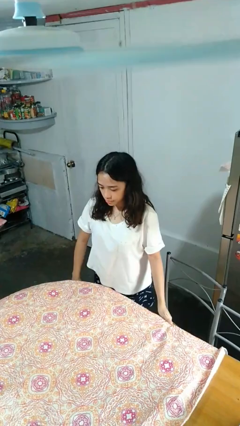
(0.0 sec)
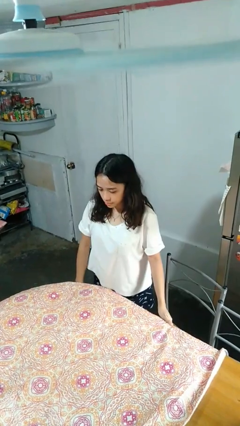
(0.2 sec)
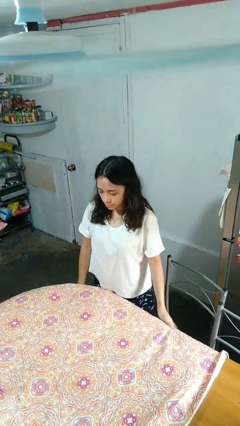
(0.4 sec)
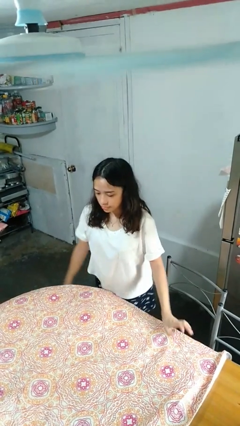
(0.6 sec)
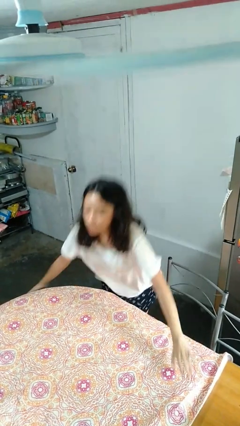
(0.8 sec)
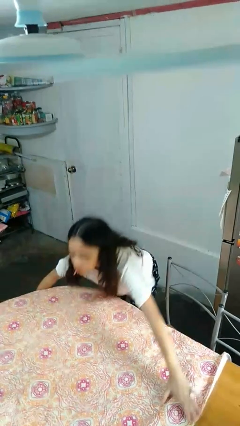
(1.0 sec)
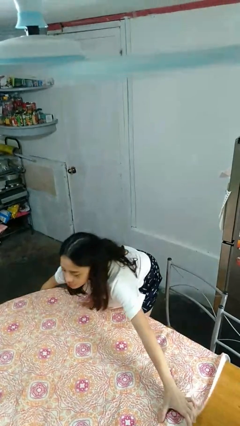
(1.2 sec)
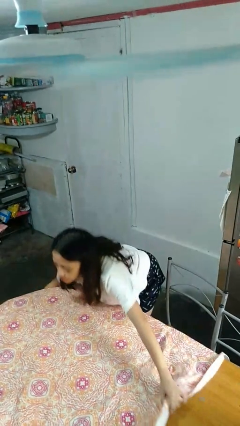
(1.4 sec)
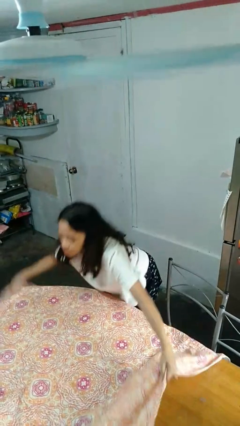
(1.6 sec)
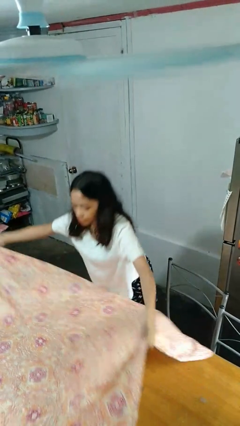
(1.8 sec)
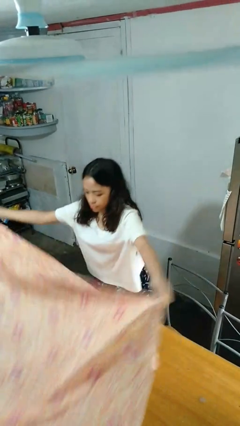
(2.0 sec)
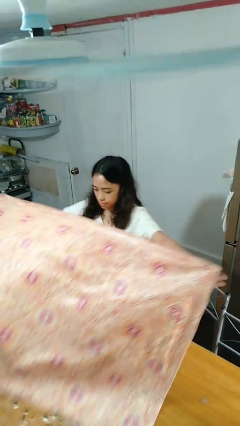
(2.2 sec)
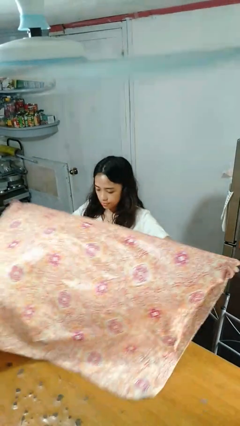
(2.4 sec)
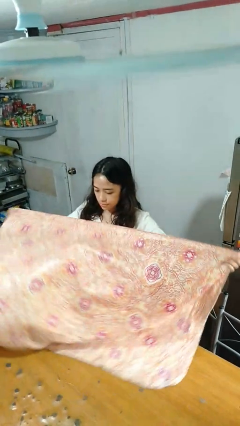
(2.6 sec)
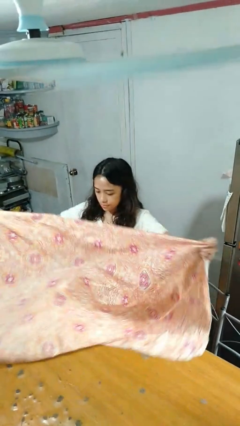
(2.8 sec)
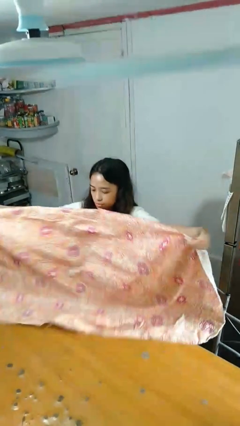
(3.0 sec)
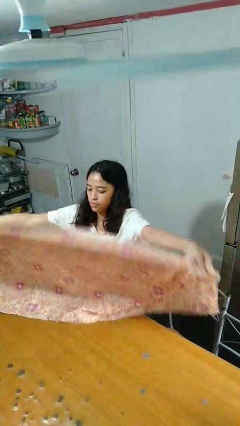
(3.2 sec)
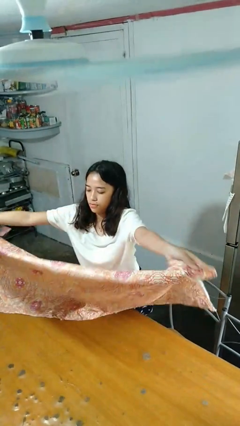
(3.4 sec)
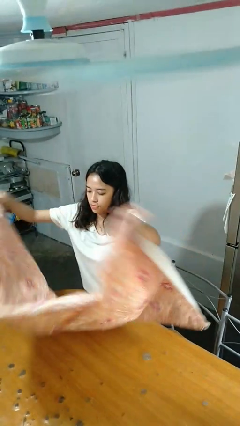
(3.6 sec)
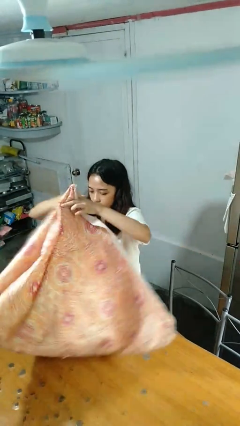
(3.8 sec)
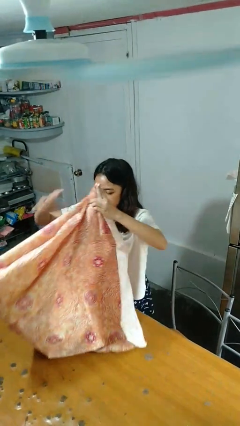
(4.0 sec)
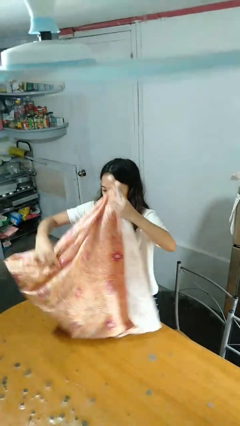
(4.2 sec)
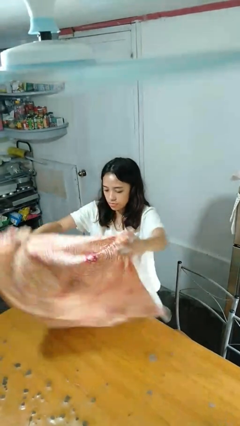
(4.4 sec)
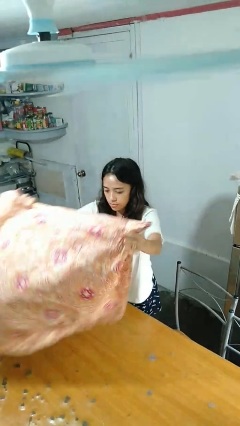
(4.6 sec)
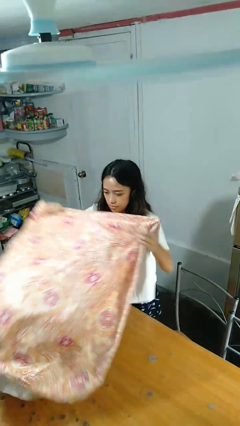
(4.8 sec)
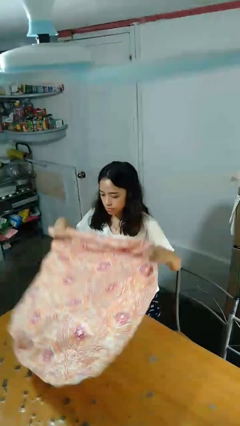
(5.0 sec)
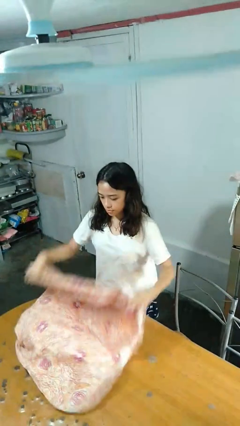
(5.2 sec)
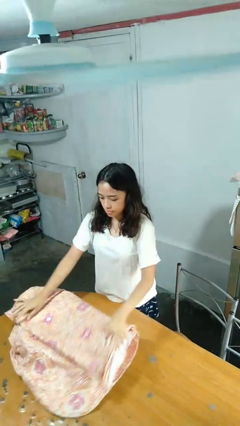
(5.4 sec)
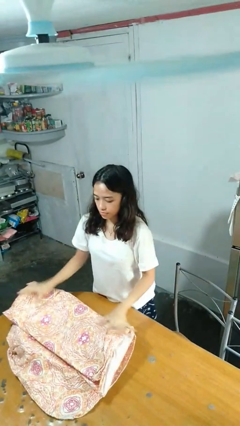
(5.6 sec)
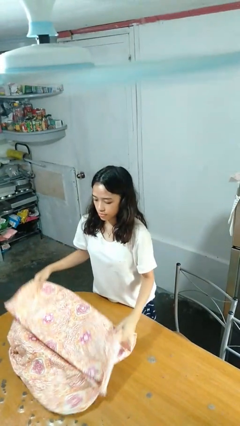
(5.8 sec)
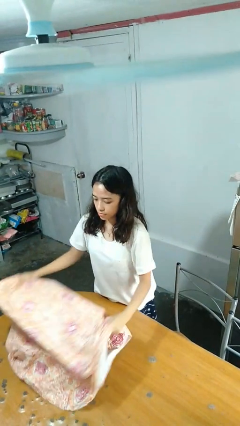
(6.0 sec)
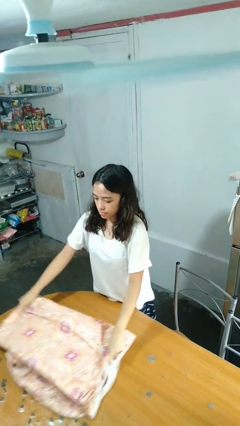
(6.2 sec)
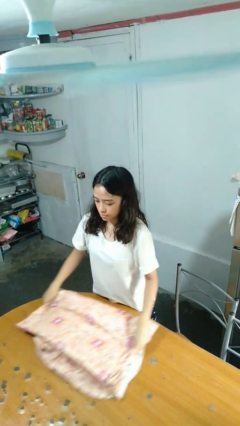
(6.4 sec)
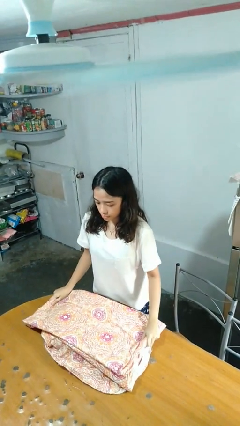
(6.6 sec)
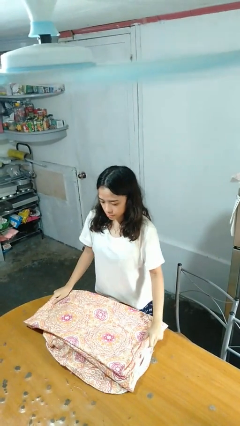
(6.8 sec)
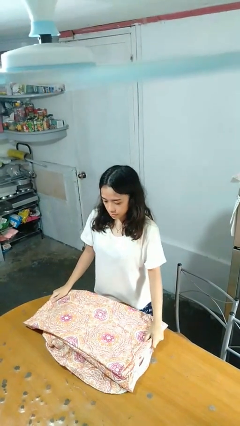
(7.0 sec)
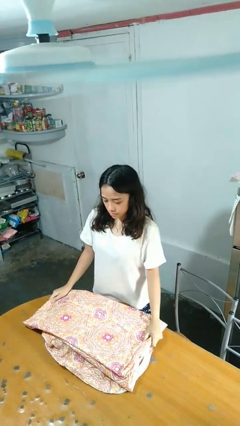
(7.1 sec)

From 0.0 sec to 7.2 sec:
person folds tablecloth

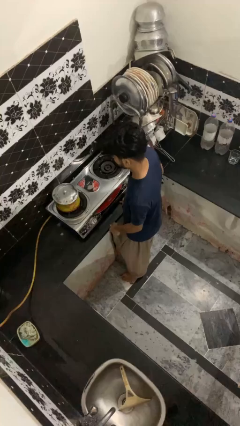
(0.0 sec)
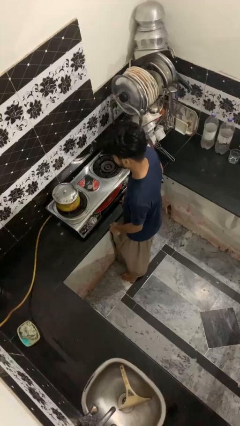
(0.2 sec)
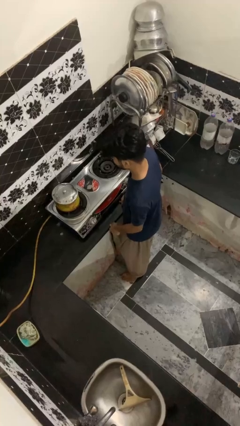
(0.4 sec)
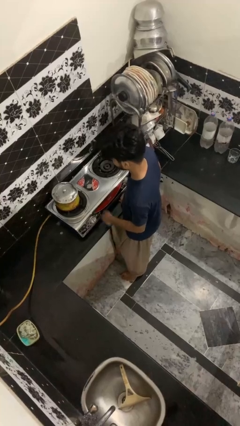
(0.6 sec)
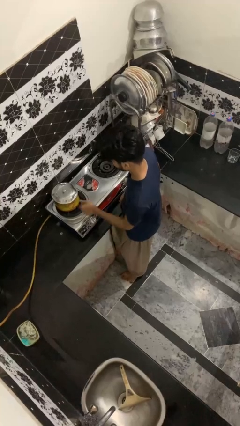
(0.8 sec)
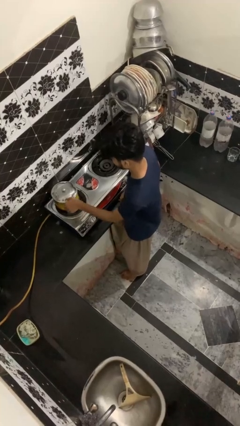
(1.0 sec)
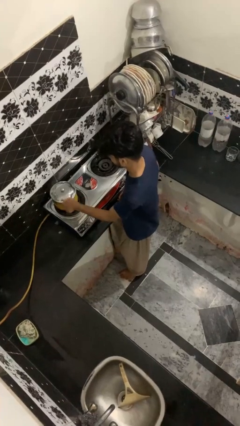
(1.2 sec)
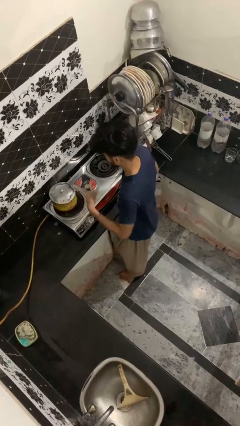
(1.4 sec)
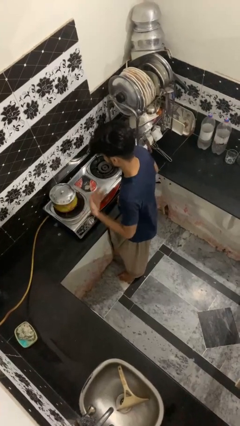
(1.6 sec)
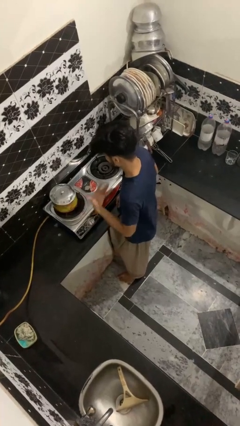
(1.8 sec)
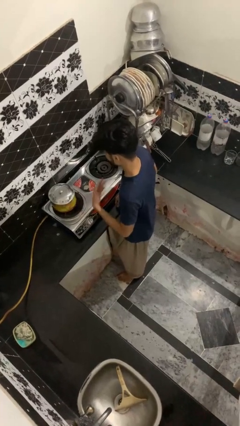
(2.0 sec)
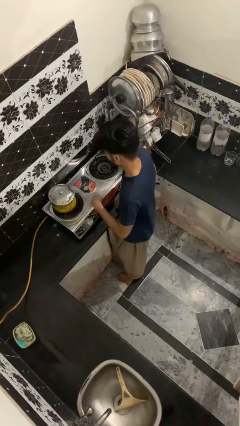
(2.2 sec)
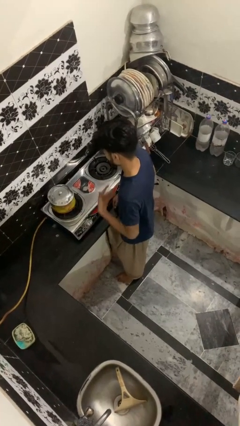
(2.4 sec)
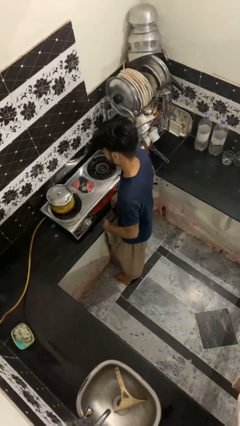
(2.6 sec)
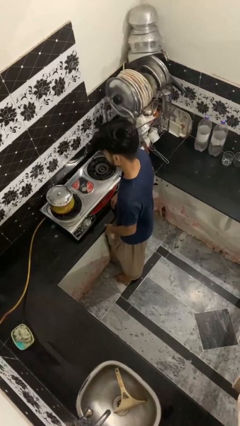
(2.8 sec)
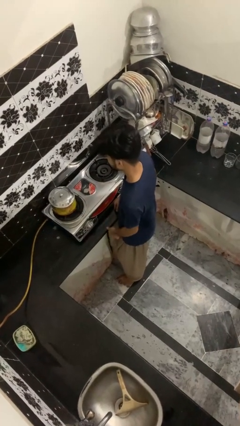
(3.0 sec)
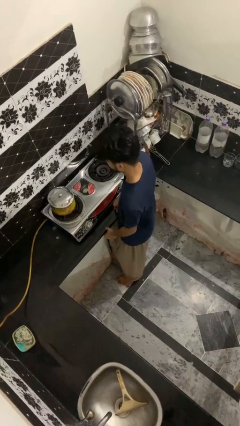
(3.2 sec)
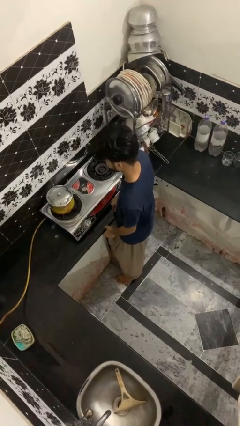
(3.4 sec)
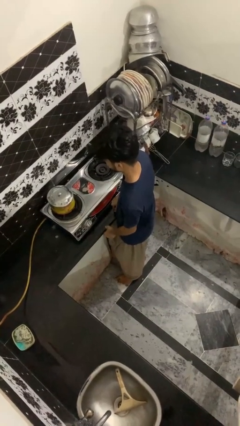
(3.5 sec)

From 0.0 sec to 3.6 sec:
person burns hand

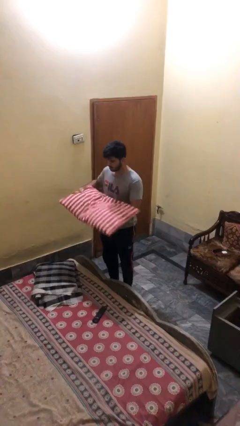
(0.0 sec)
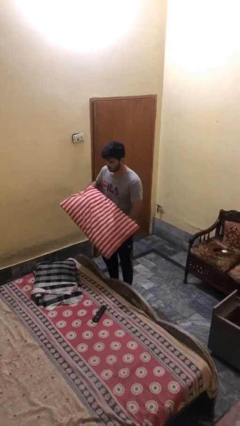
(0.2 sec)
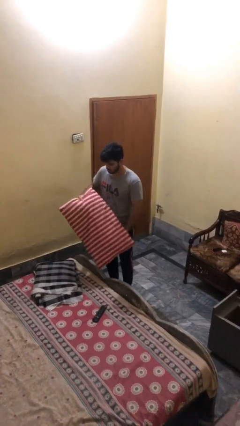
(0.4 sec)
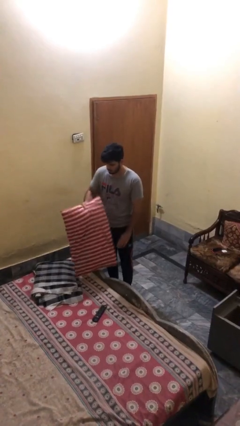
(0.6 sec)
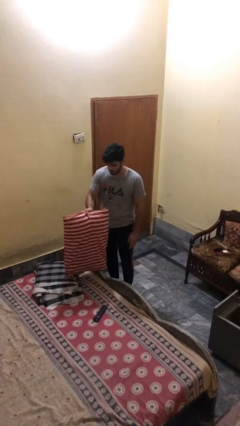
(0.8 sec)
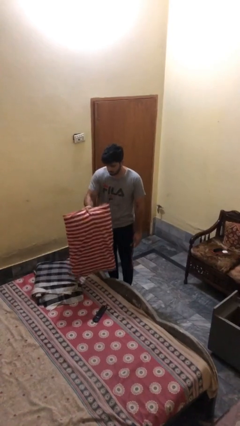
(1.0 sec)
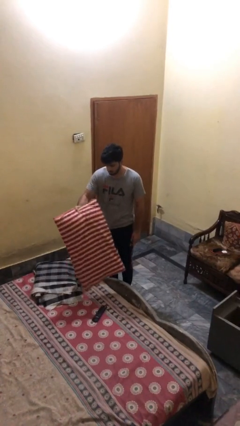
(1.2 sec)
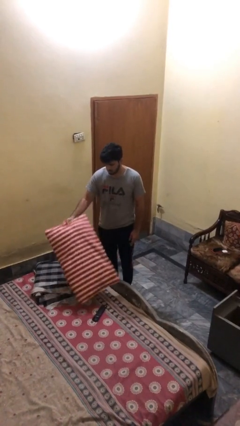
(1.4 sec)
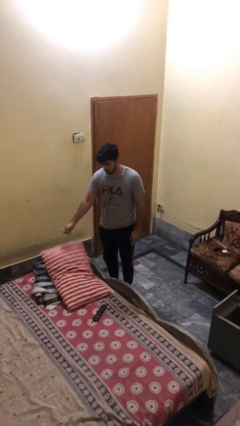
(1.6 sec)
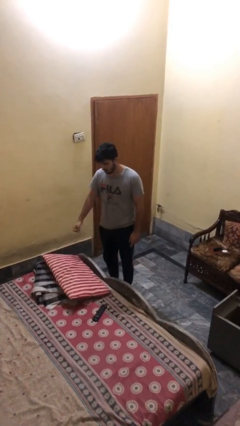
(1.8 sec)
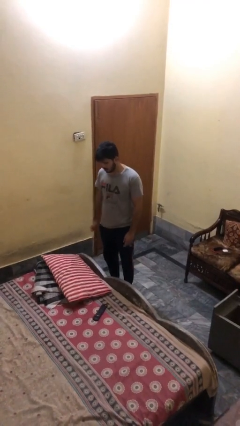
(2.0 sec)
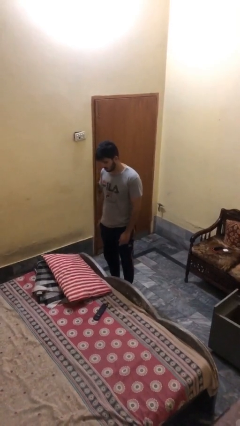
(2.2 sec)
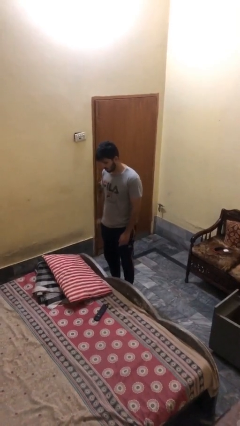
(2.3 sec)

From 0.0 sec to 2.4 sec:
person puts down object on bed

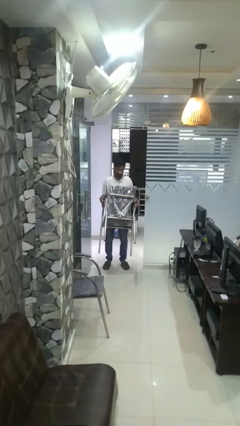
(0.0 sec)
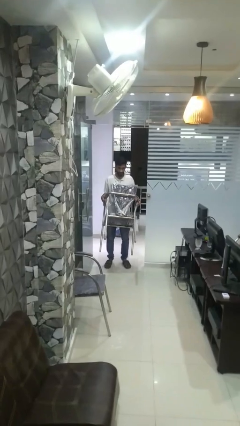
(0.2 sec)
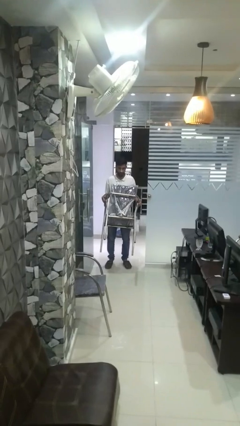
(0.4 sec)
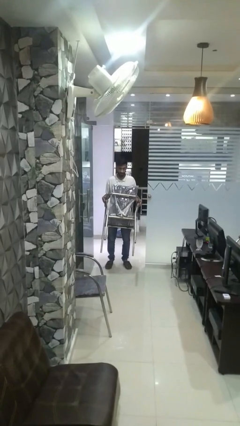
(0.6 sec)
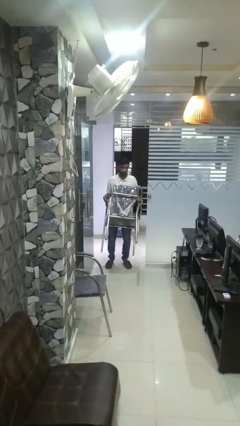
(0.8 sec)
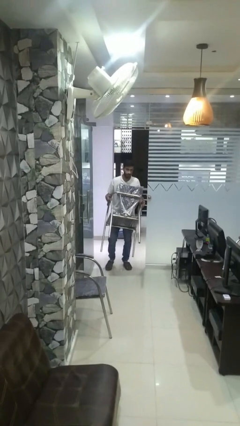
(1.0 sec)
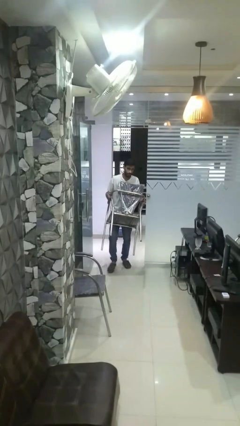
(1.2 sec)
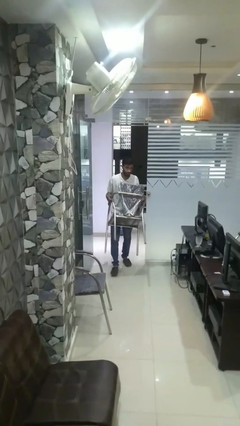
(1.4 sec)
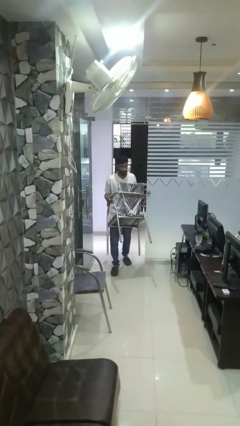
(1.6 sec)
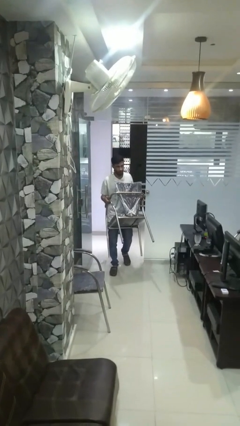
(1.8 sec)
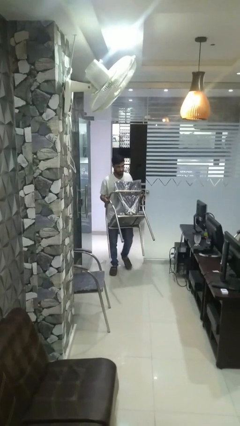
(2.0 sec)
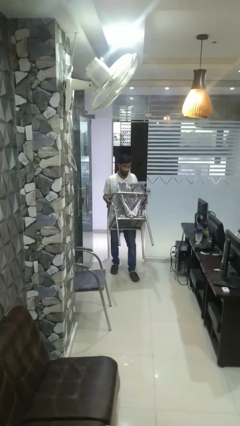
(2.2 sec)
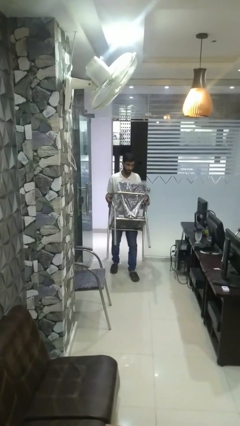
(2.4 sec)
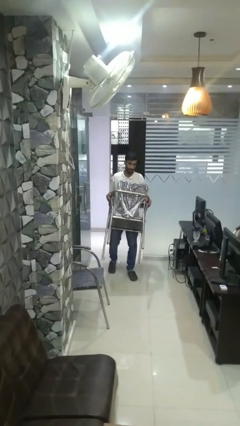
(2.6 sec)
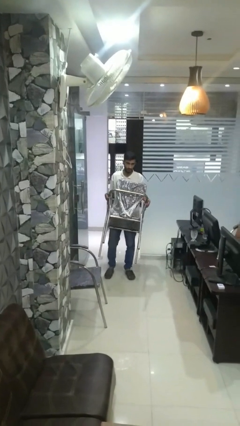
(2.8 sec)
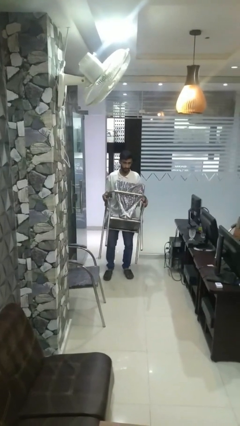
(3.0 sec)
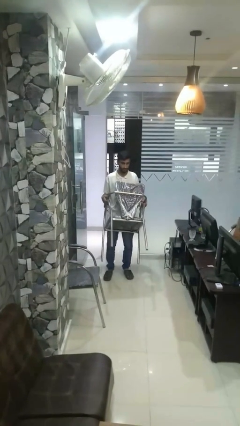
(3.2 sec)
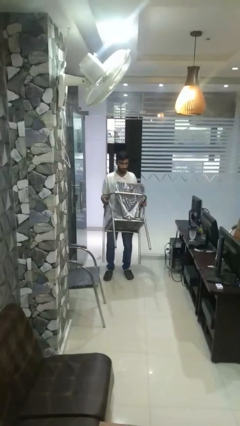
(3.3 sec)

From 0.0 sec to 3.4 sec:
person carries furniture

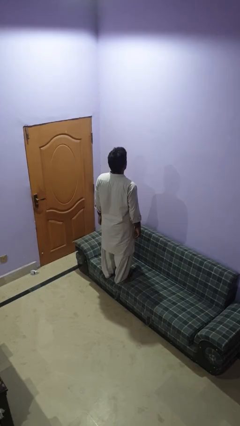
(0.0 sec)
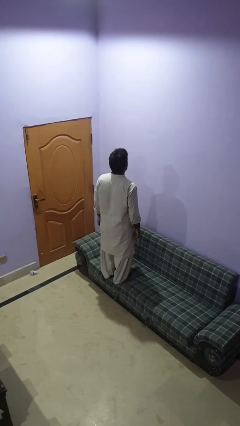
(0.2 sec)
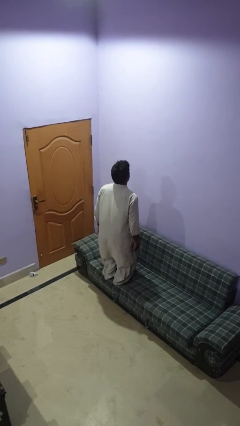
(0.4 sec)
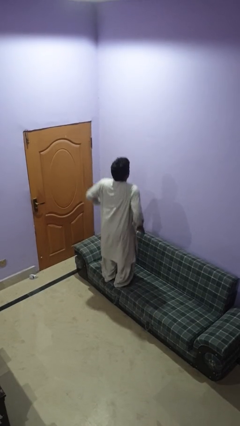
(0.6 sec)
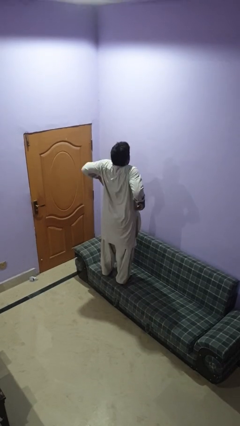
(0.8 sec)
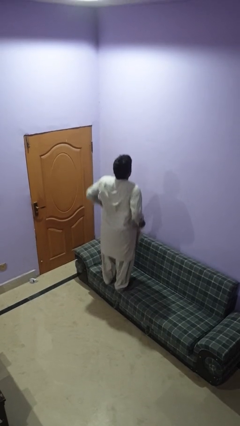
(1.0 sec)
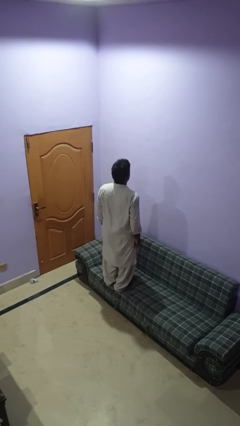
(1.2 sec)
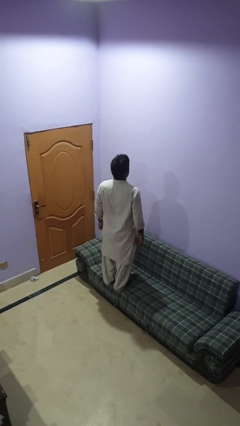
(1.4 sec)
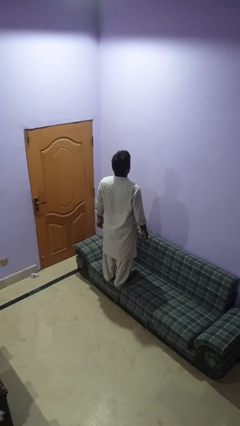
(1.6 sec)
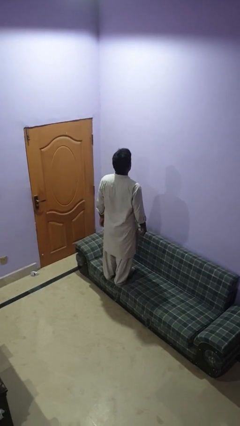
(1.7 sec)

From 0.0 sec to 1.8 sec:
person jumps on couch
